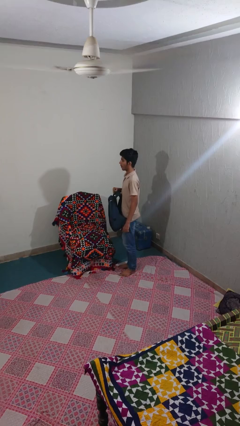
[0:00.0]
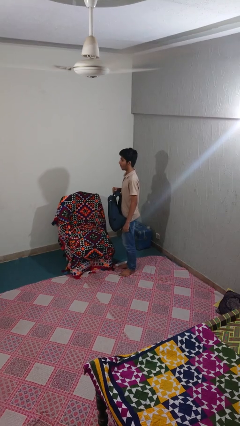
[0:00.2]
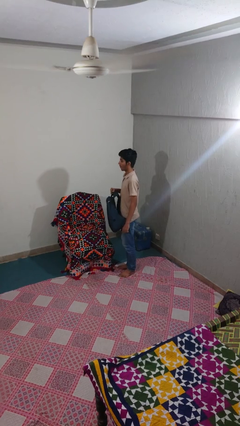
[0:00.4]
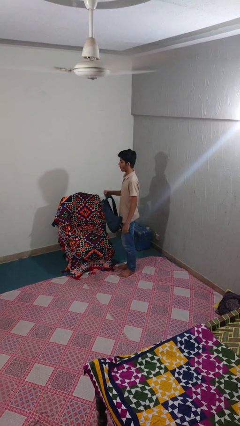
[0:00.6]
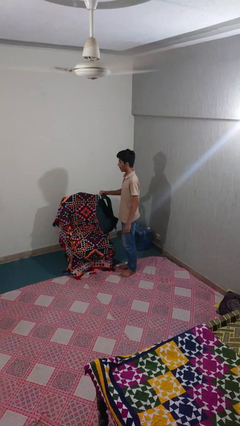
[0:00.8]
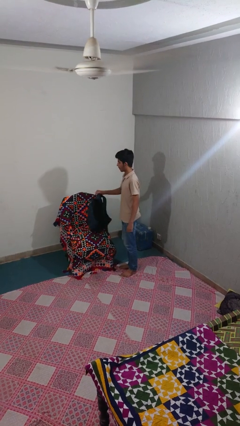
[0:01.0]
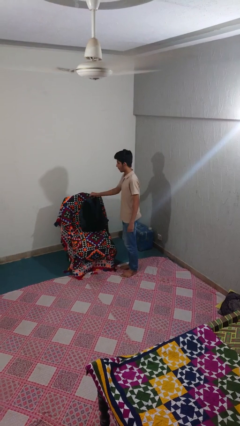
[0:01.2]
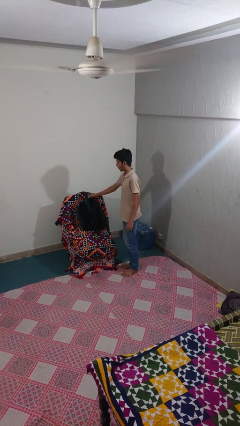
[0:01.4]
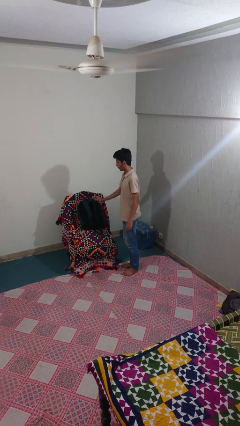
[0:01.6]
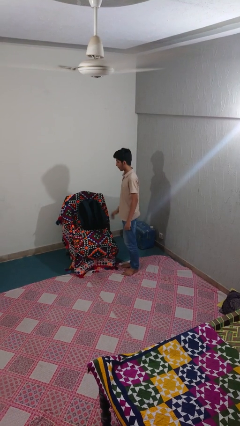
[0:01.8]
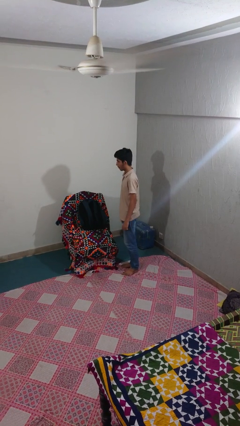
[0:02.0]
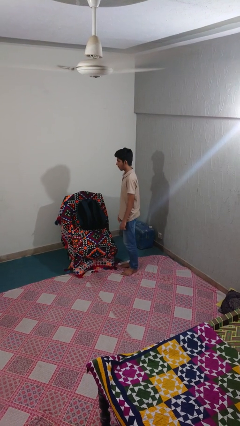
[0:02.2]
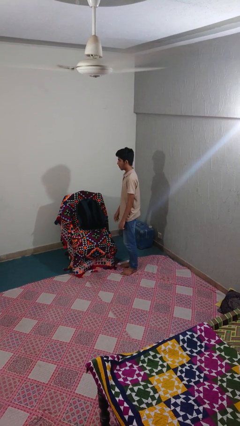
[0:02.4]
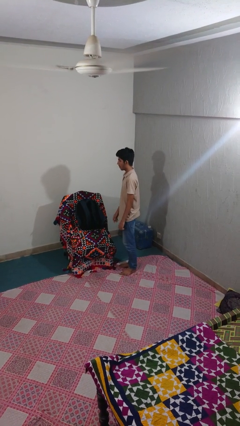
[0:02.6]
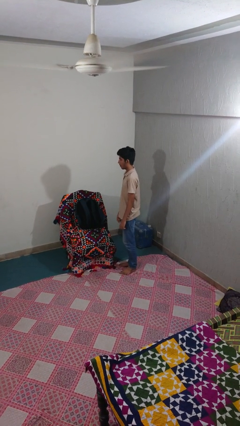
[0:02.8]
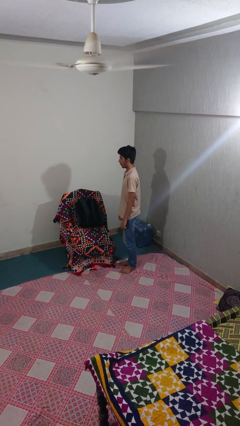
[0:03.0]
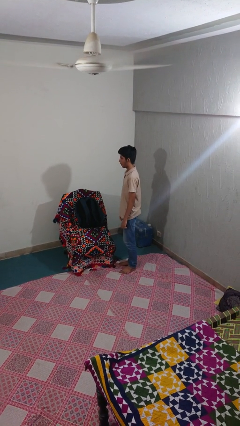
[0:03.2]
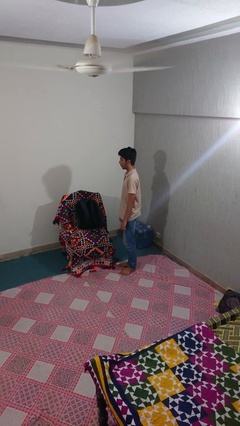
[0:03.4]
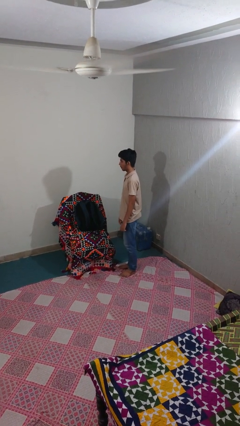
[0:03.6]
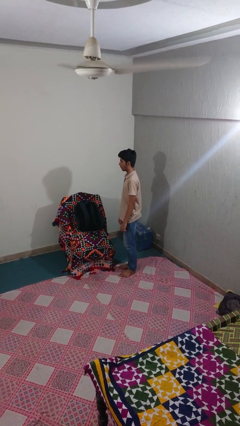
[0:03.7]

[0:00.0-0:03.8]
person puts down object on couch

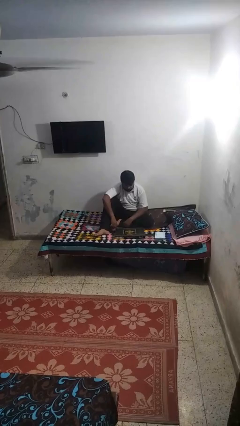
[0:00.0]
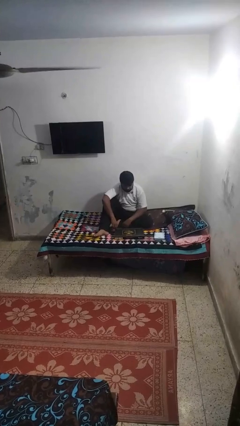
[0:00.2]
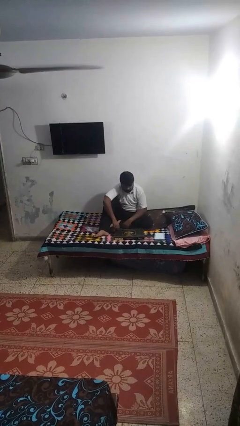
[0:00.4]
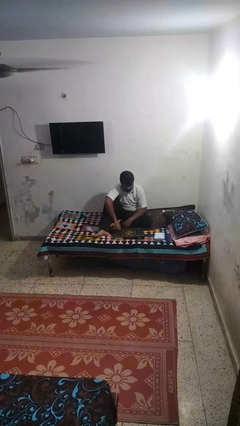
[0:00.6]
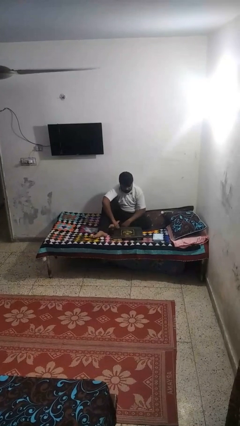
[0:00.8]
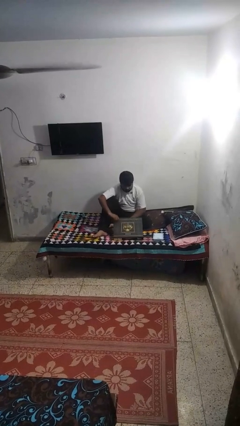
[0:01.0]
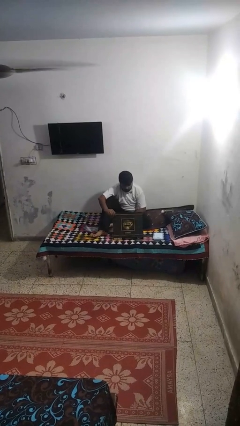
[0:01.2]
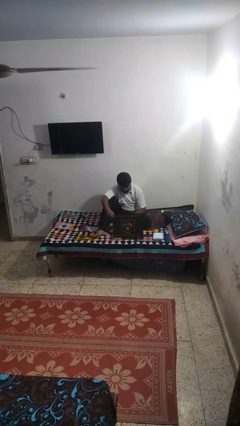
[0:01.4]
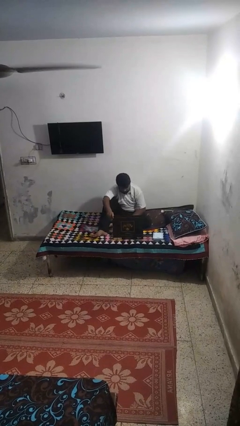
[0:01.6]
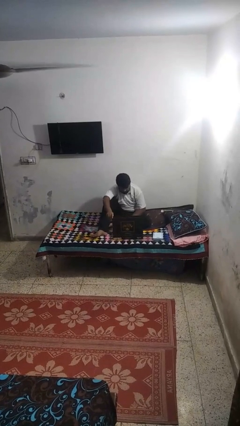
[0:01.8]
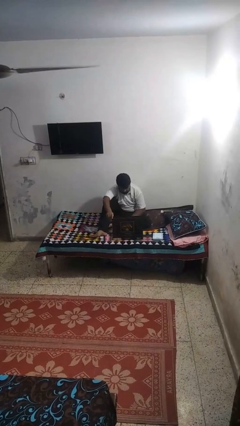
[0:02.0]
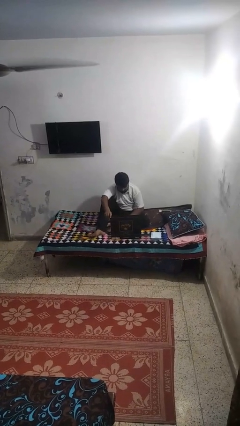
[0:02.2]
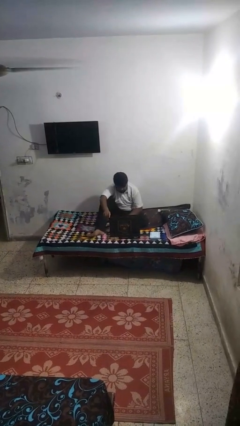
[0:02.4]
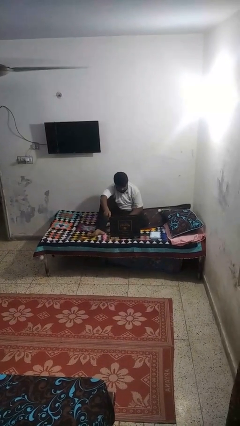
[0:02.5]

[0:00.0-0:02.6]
person opens laptop

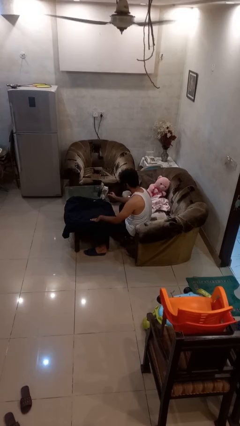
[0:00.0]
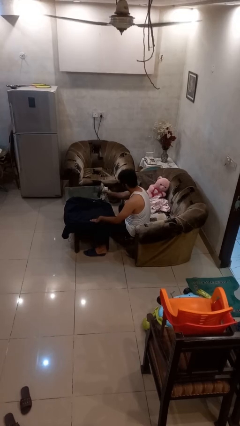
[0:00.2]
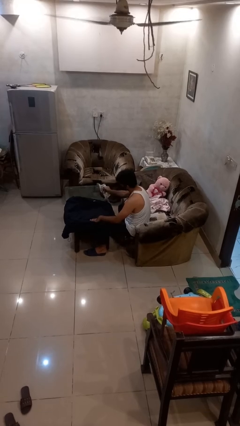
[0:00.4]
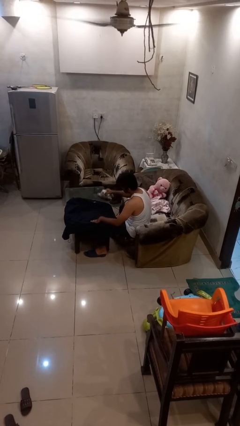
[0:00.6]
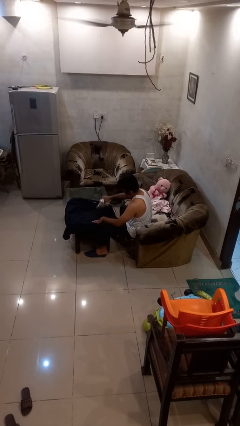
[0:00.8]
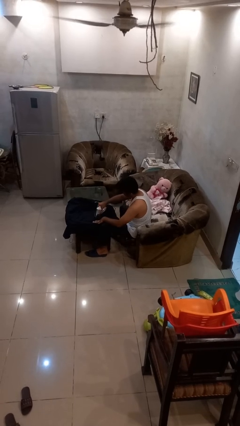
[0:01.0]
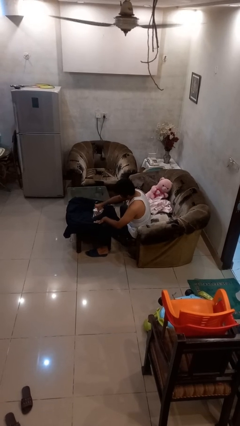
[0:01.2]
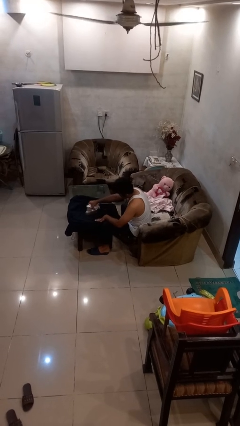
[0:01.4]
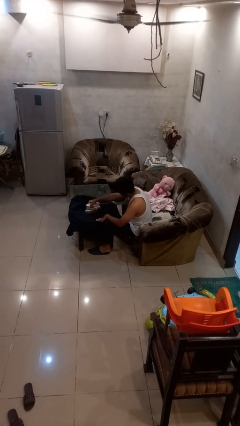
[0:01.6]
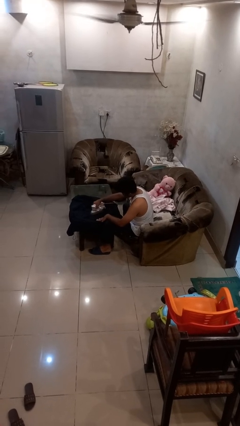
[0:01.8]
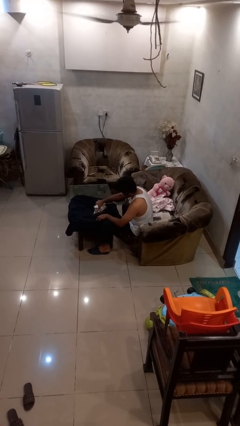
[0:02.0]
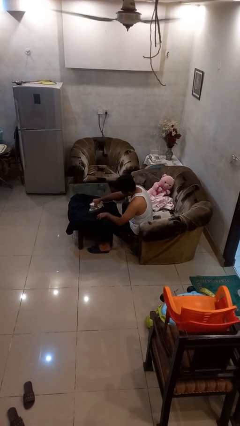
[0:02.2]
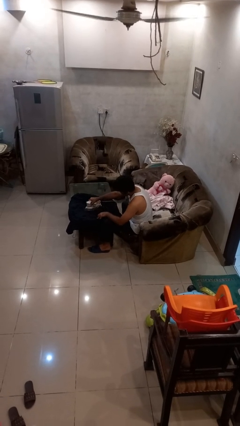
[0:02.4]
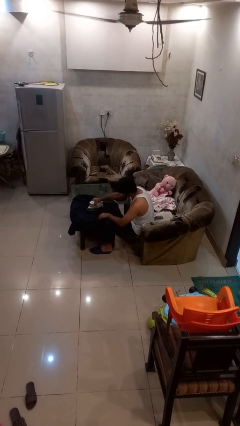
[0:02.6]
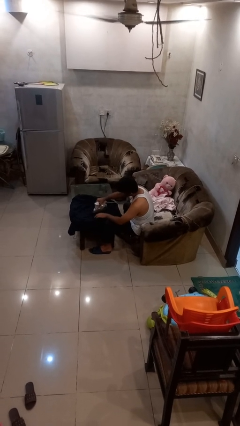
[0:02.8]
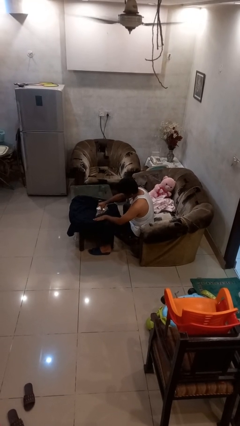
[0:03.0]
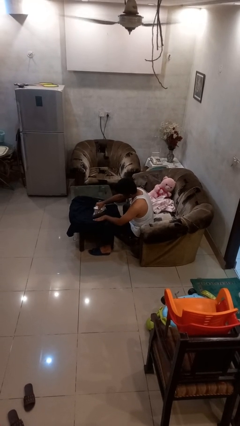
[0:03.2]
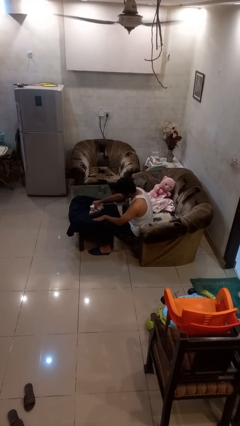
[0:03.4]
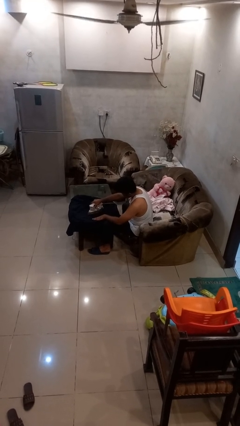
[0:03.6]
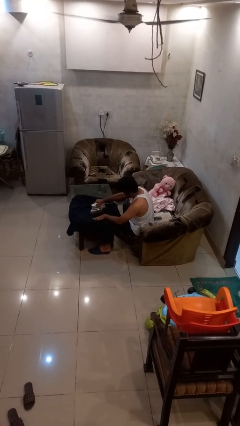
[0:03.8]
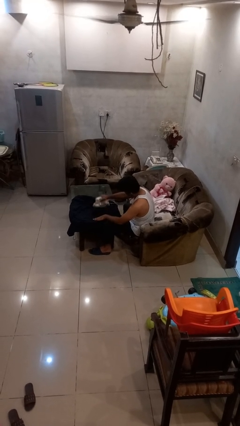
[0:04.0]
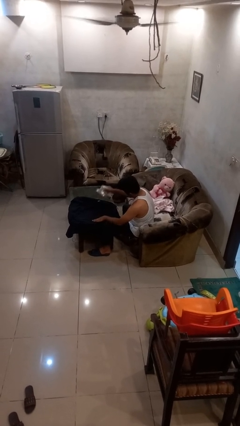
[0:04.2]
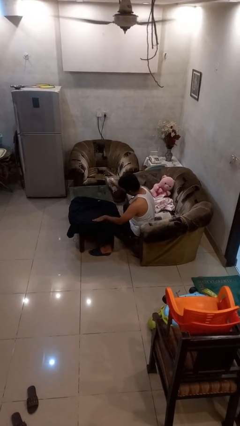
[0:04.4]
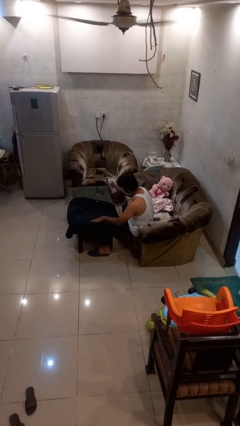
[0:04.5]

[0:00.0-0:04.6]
person irons clothes

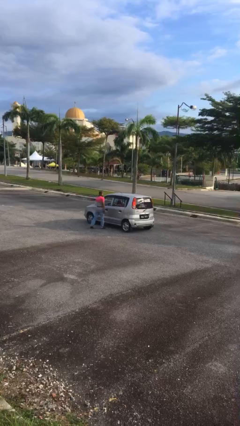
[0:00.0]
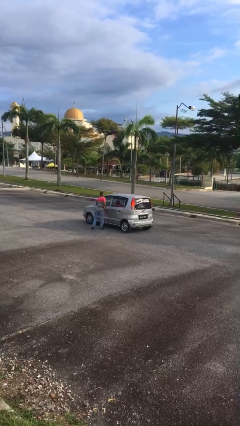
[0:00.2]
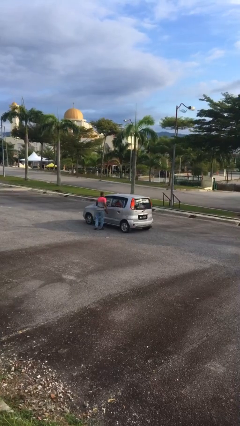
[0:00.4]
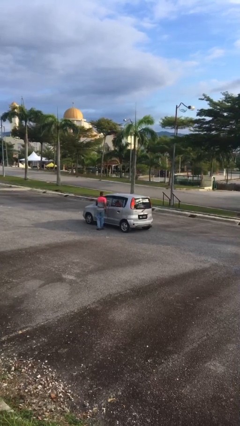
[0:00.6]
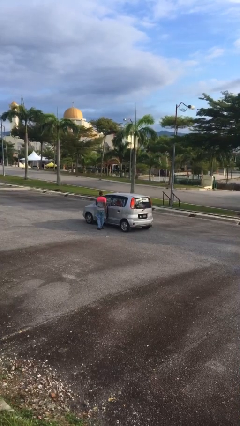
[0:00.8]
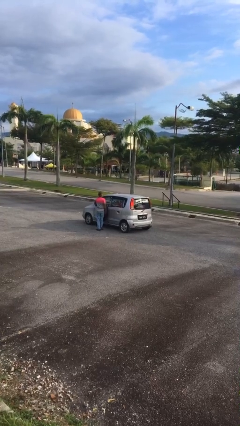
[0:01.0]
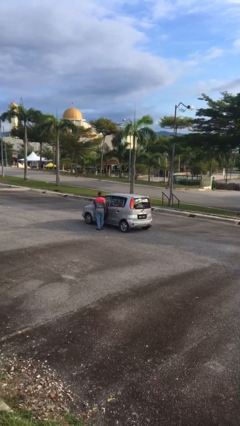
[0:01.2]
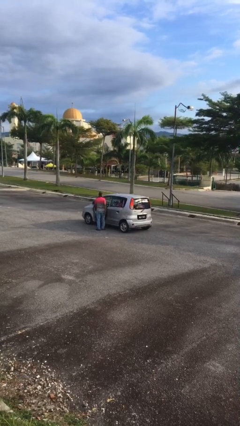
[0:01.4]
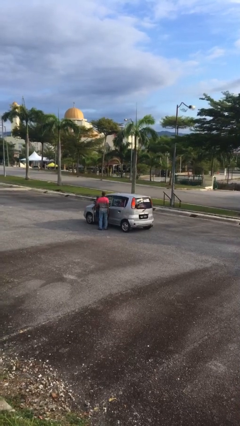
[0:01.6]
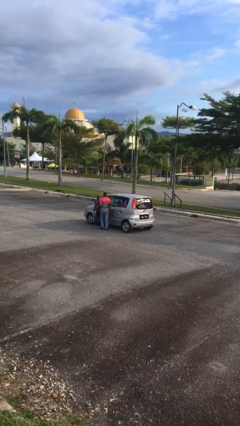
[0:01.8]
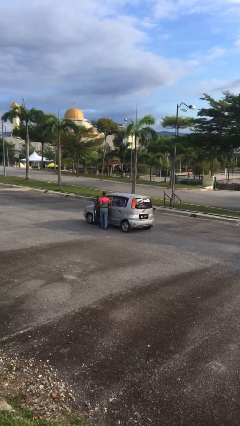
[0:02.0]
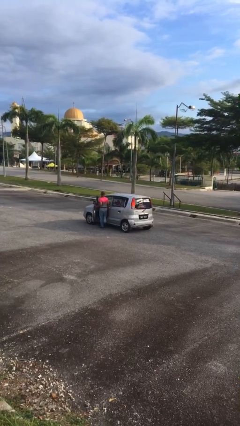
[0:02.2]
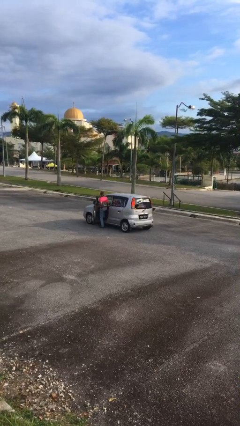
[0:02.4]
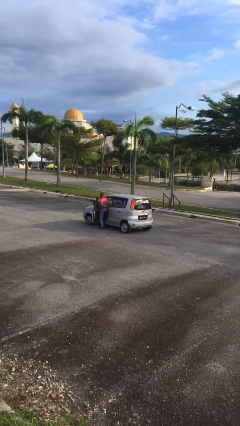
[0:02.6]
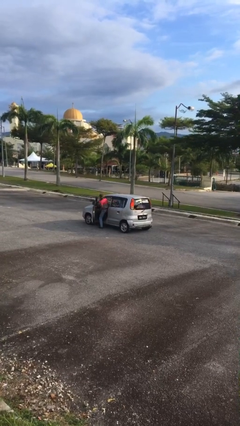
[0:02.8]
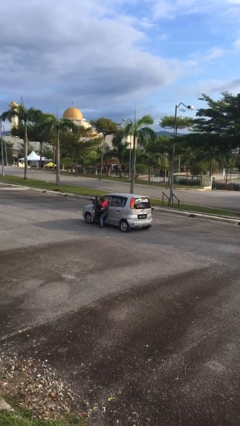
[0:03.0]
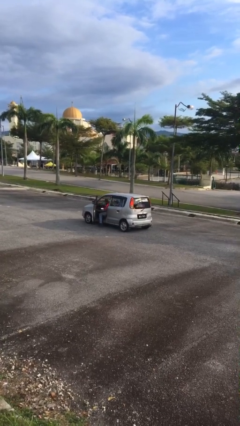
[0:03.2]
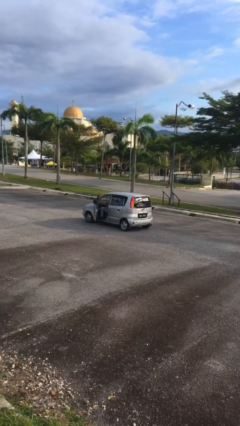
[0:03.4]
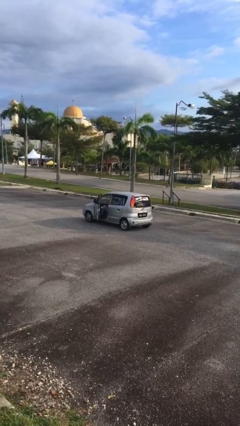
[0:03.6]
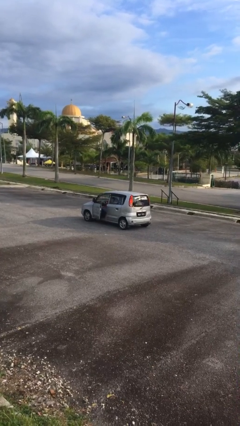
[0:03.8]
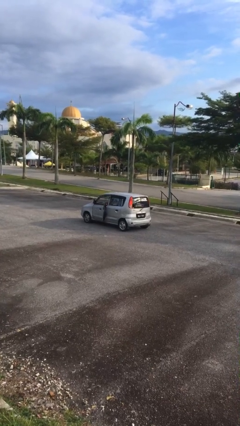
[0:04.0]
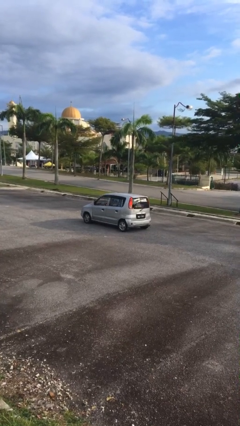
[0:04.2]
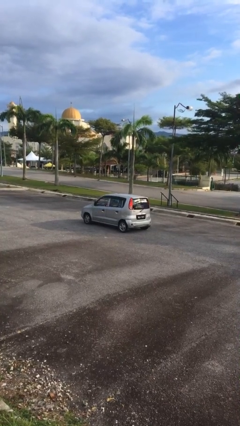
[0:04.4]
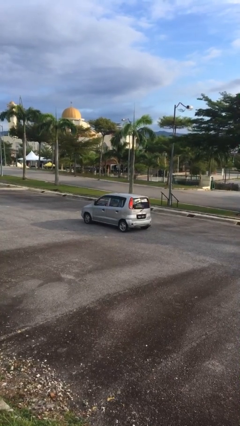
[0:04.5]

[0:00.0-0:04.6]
car picks up person

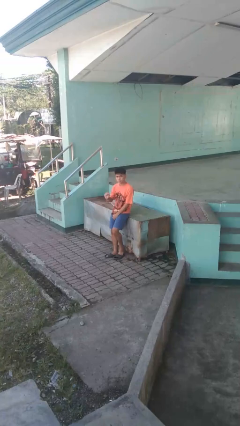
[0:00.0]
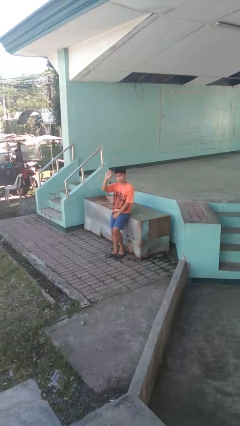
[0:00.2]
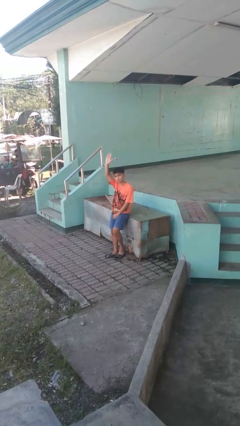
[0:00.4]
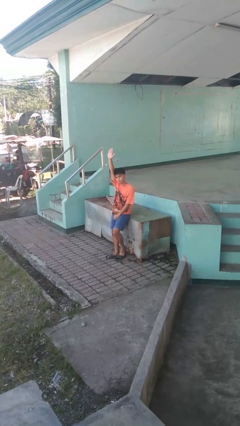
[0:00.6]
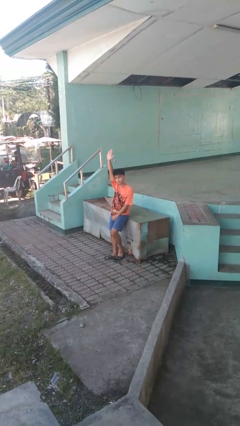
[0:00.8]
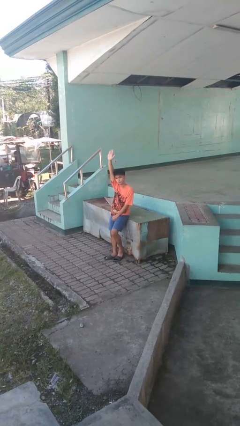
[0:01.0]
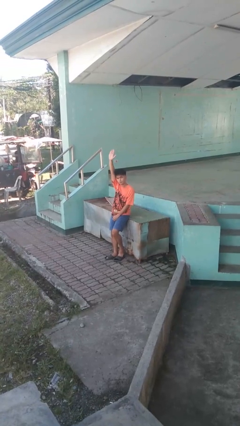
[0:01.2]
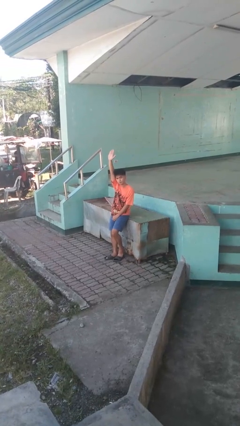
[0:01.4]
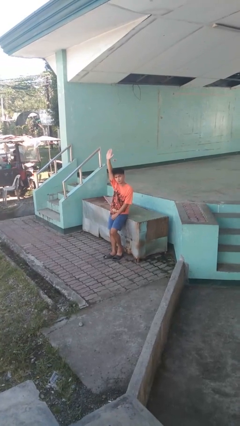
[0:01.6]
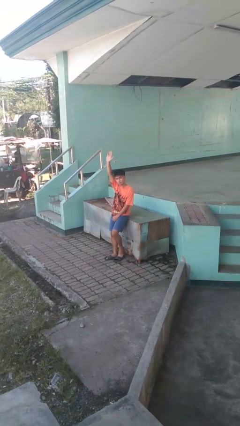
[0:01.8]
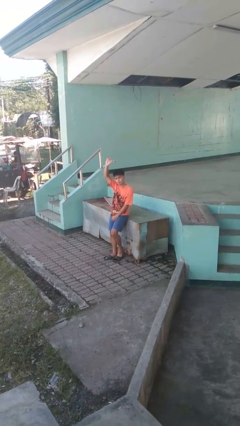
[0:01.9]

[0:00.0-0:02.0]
person gestures raise hand
